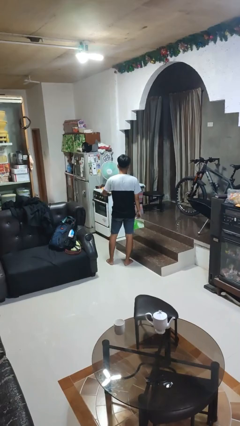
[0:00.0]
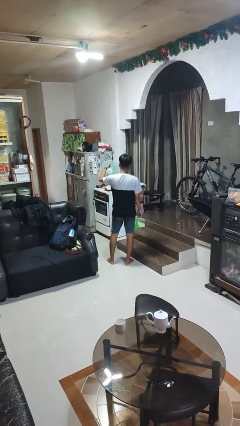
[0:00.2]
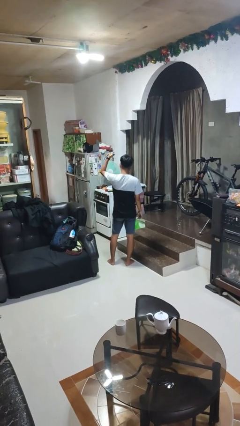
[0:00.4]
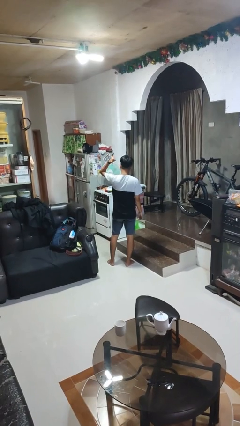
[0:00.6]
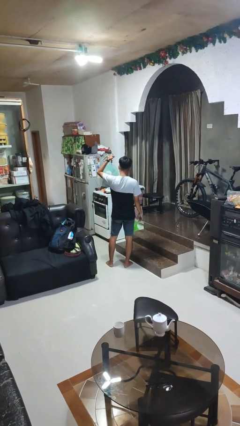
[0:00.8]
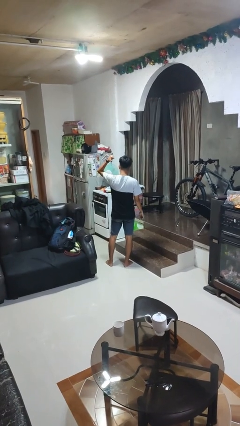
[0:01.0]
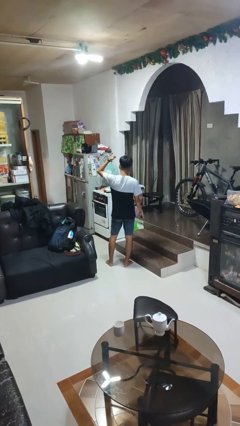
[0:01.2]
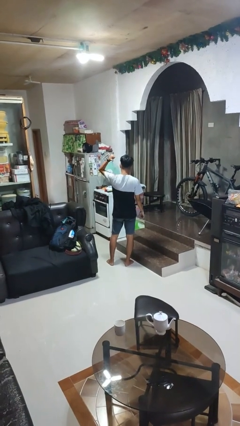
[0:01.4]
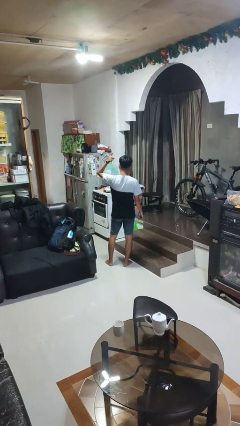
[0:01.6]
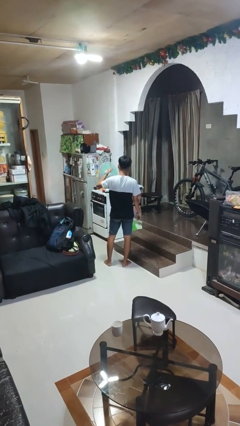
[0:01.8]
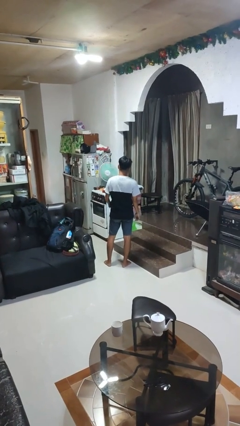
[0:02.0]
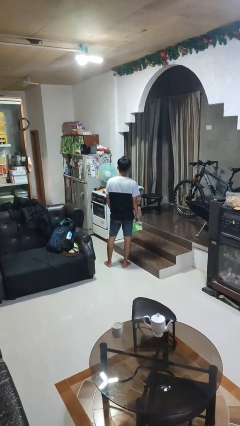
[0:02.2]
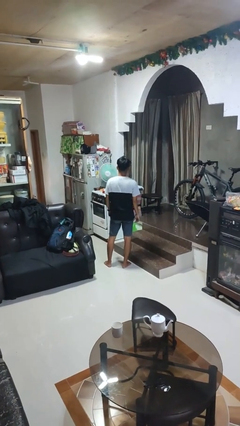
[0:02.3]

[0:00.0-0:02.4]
person gestures behind me

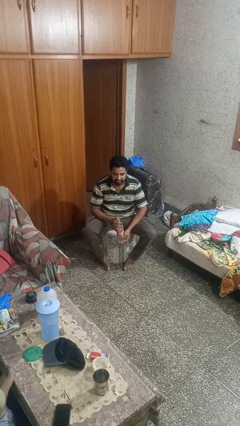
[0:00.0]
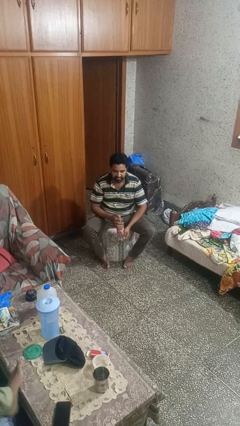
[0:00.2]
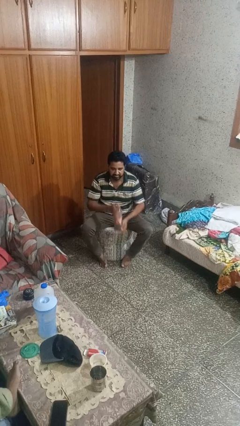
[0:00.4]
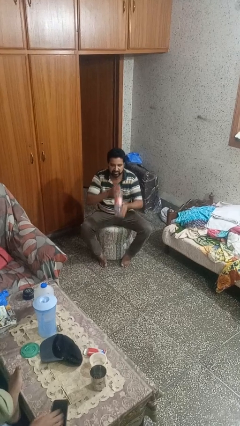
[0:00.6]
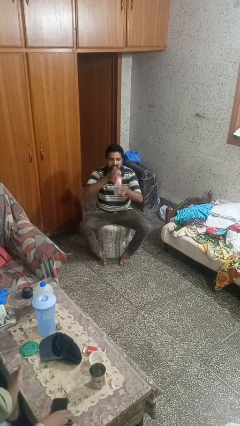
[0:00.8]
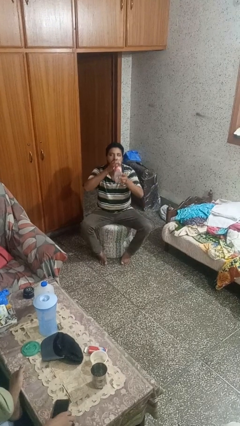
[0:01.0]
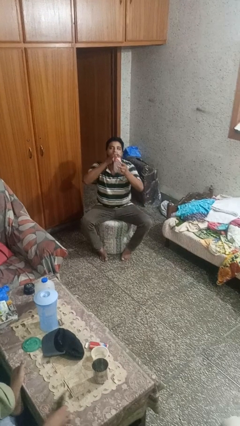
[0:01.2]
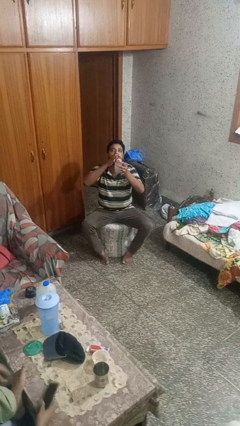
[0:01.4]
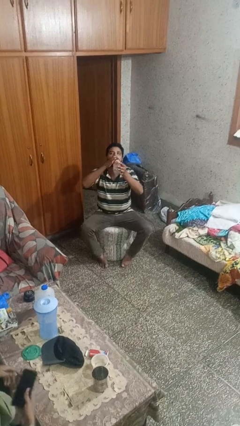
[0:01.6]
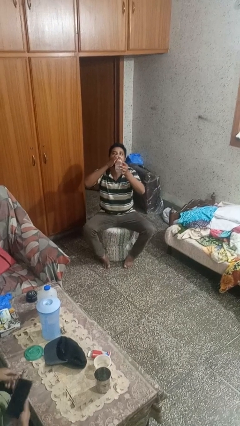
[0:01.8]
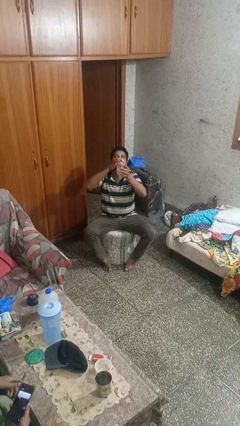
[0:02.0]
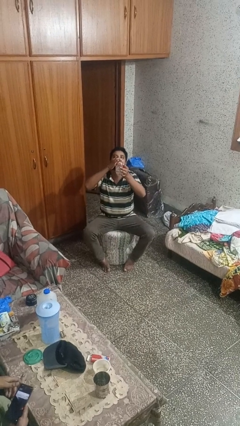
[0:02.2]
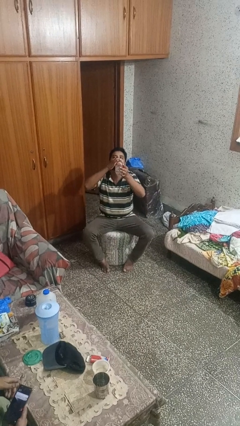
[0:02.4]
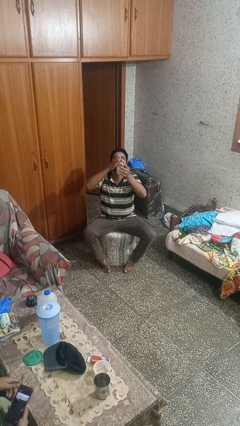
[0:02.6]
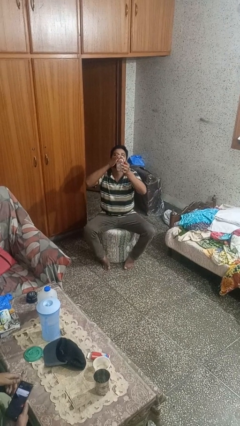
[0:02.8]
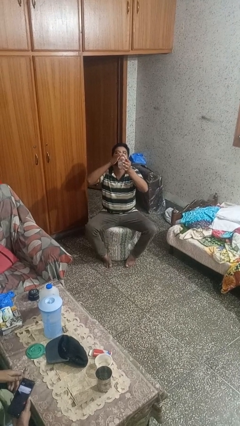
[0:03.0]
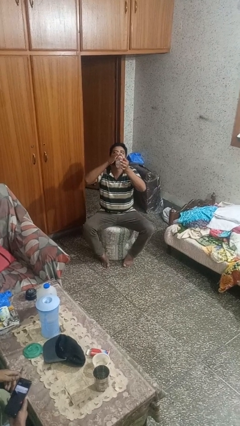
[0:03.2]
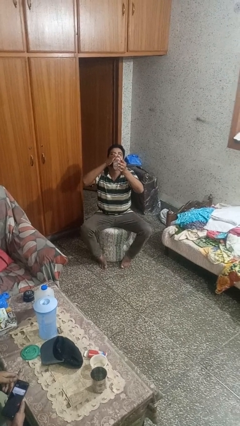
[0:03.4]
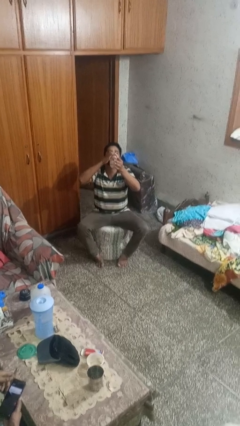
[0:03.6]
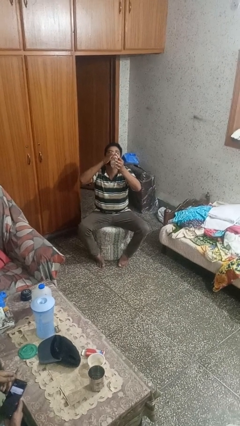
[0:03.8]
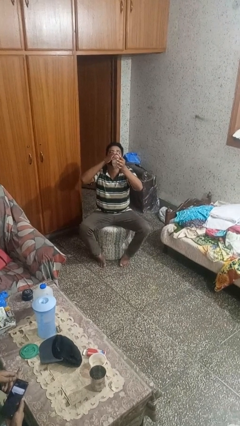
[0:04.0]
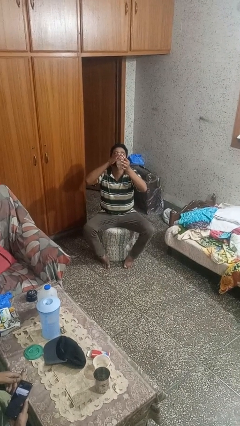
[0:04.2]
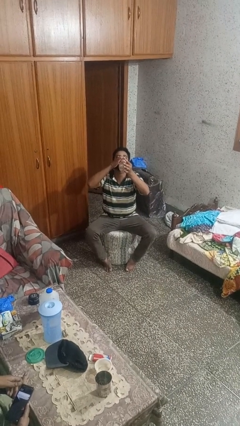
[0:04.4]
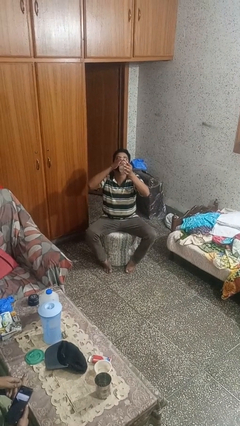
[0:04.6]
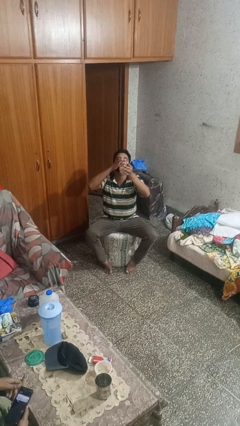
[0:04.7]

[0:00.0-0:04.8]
person drinks from bottle

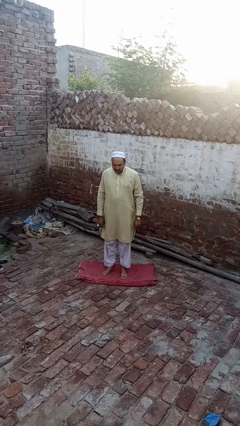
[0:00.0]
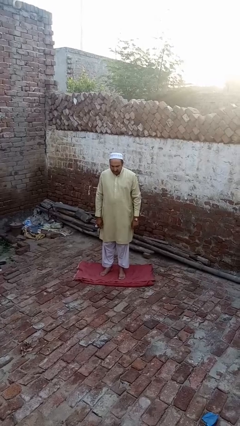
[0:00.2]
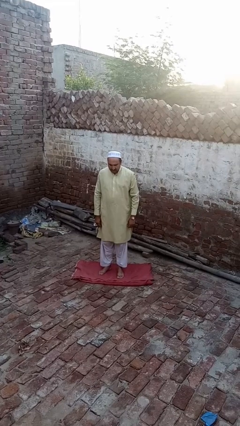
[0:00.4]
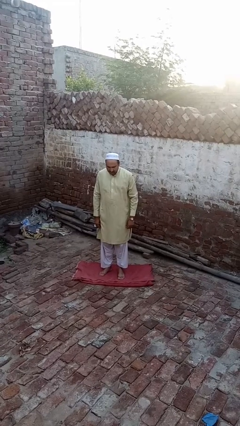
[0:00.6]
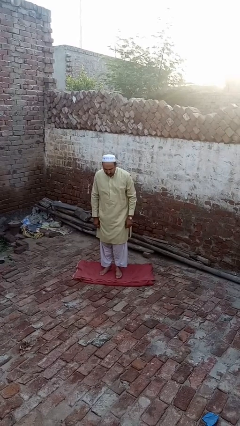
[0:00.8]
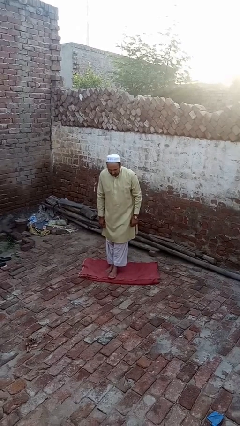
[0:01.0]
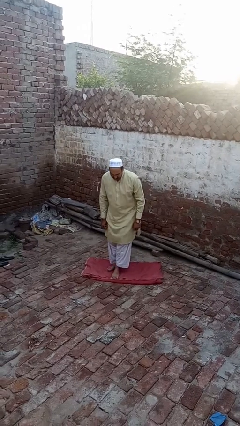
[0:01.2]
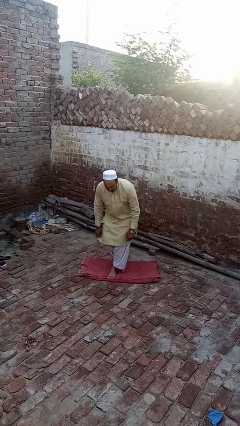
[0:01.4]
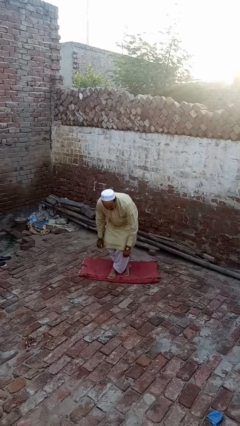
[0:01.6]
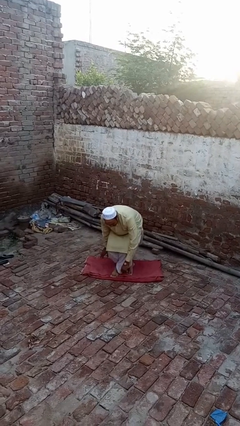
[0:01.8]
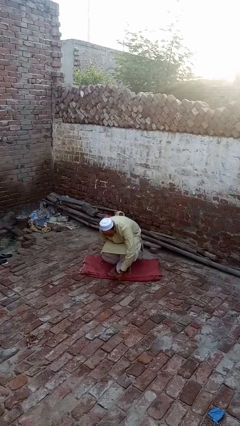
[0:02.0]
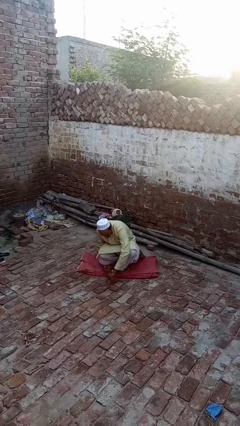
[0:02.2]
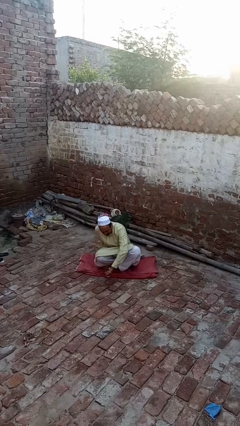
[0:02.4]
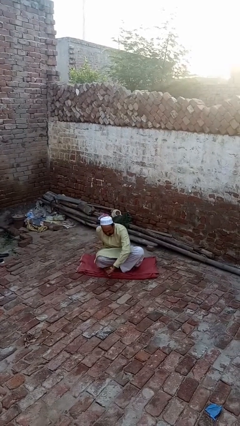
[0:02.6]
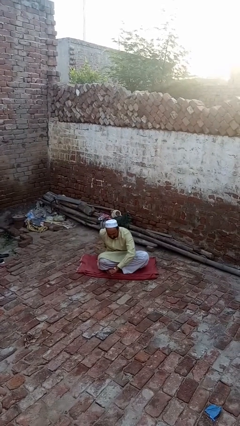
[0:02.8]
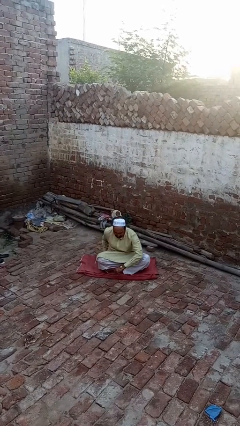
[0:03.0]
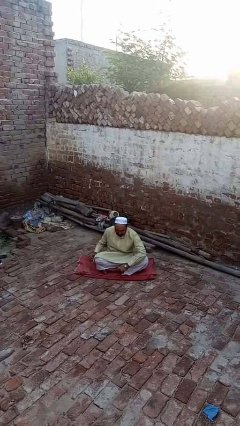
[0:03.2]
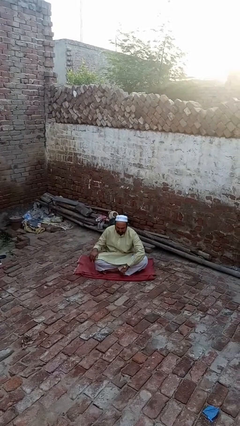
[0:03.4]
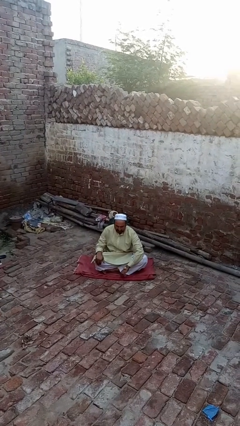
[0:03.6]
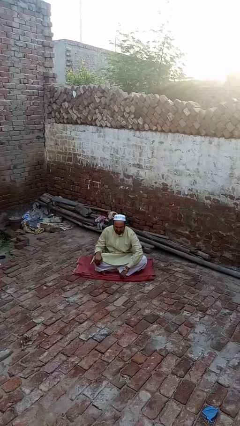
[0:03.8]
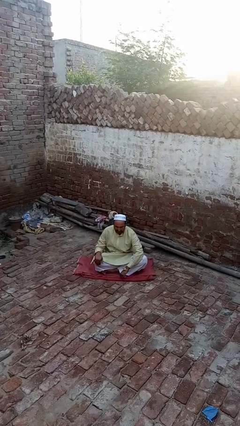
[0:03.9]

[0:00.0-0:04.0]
person sits crisscross

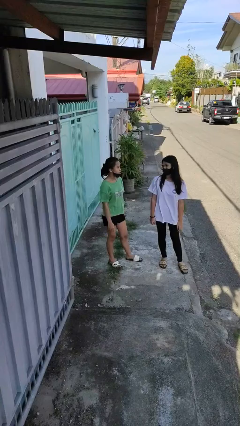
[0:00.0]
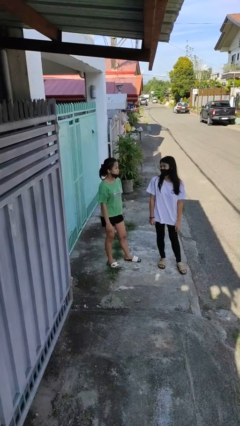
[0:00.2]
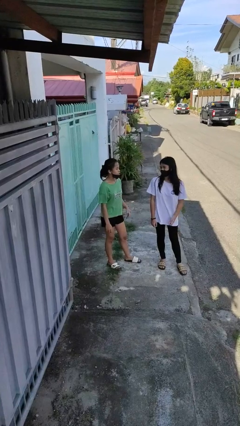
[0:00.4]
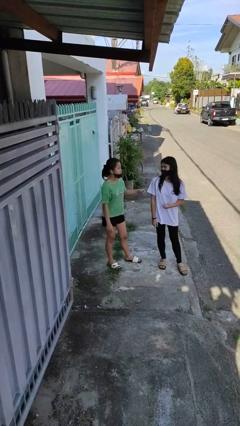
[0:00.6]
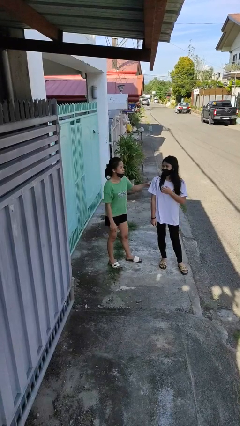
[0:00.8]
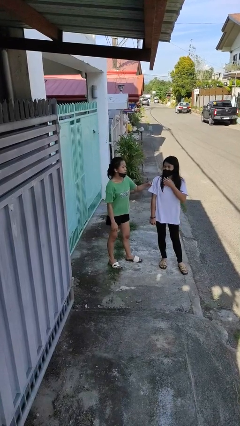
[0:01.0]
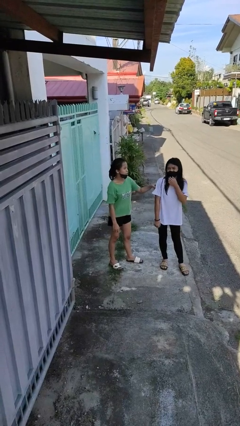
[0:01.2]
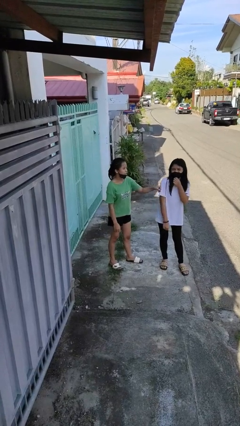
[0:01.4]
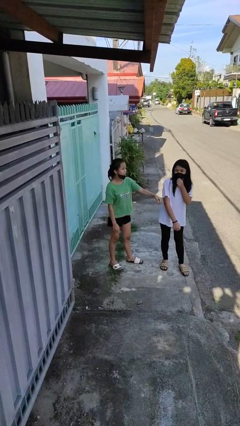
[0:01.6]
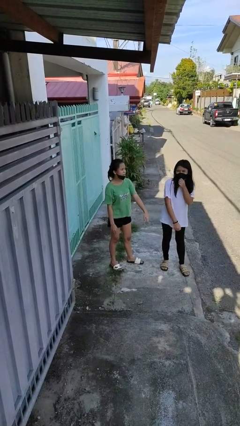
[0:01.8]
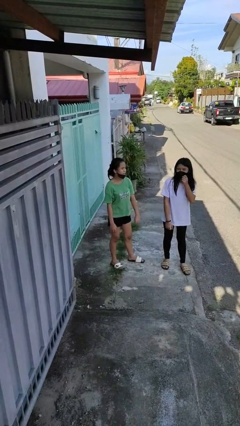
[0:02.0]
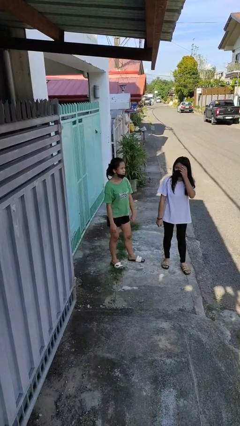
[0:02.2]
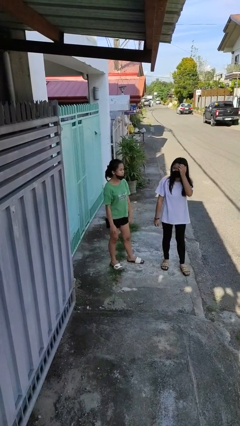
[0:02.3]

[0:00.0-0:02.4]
person pounds shoulders of person

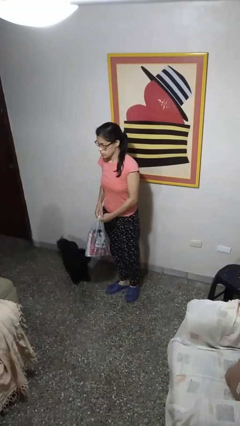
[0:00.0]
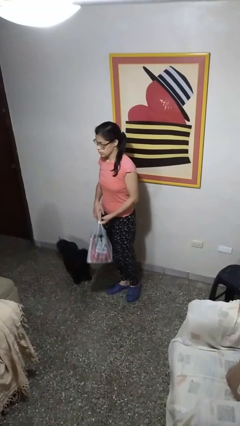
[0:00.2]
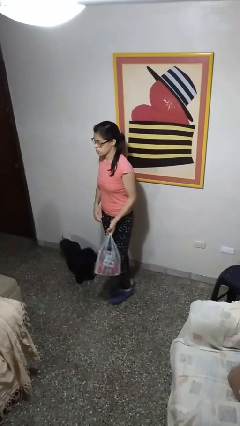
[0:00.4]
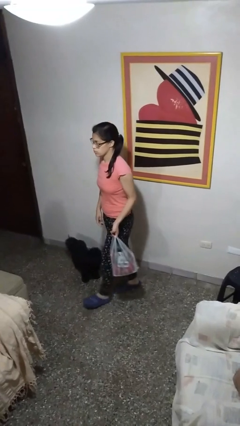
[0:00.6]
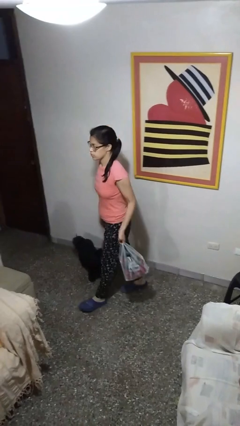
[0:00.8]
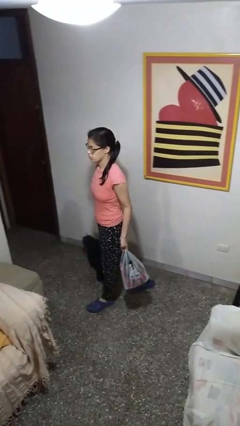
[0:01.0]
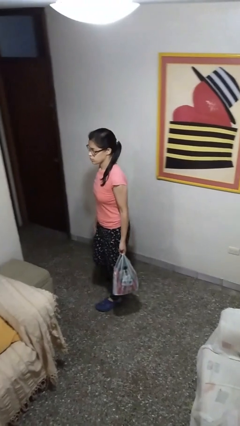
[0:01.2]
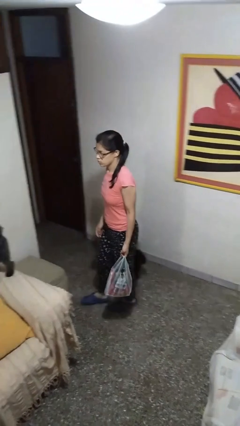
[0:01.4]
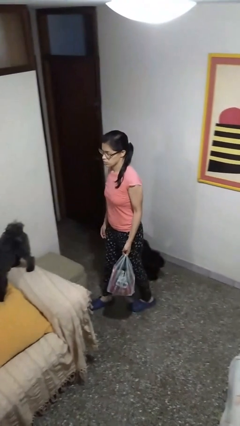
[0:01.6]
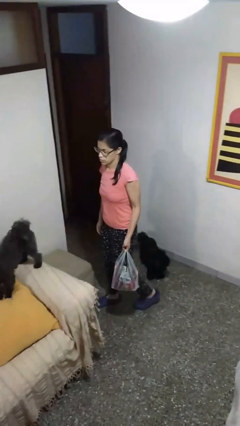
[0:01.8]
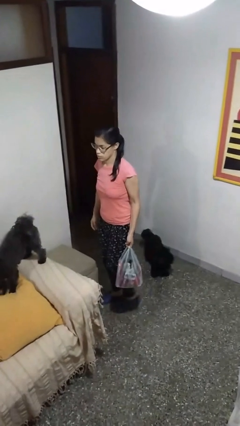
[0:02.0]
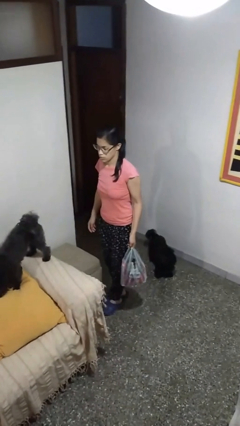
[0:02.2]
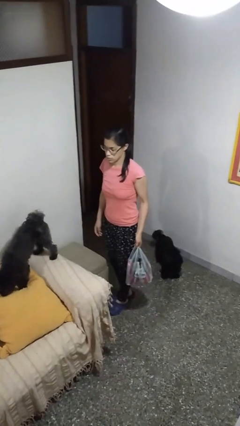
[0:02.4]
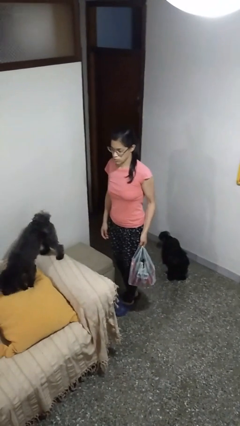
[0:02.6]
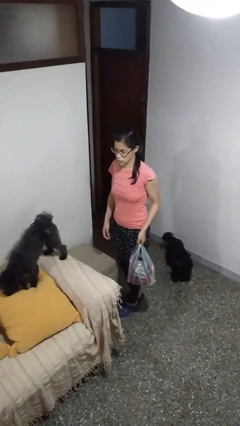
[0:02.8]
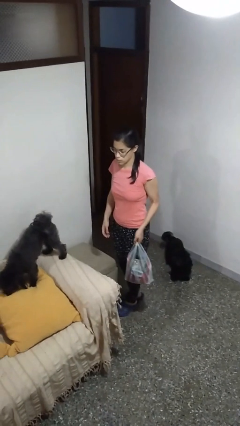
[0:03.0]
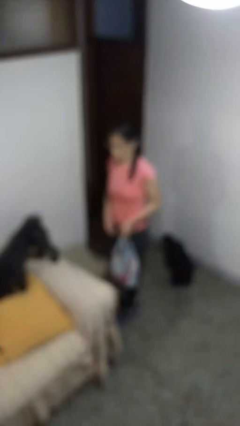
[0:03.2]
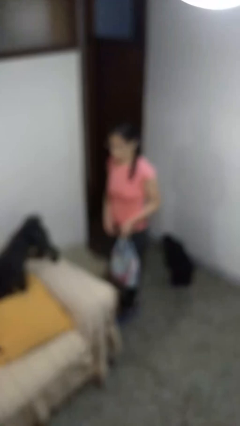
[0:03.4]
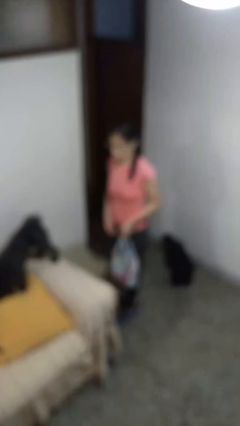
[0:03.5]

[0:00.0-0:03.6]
person carries groceries
